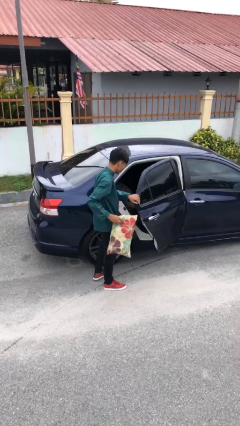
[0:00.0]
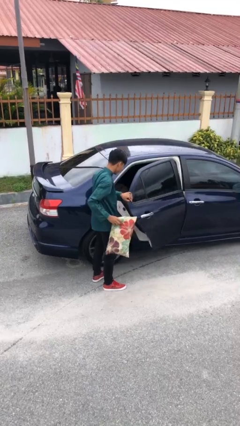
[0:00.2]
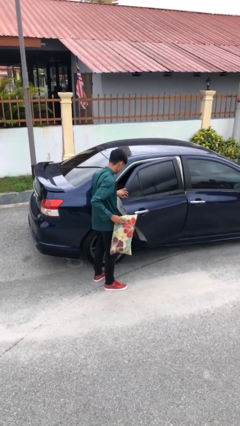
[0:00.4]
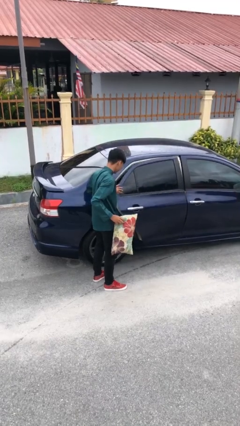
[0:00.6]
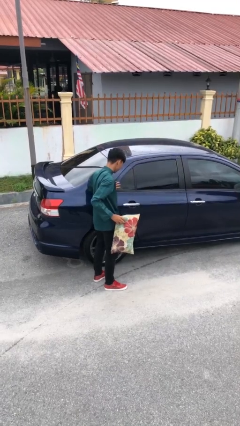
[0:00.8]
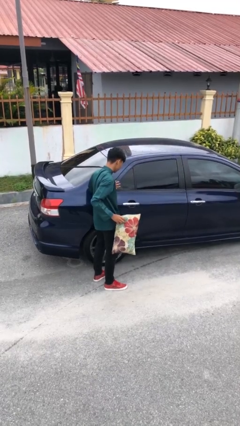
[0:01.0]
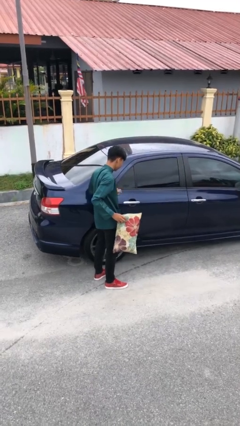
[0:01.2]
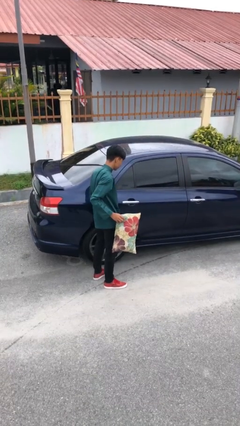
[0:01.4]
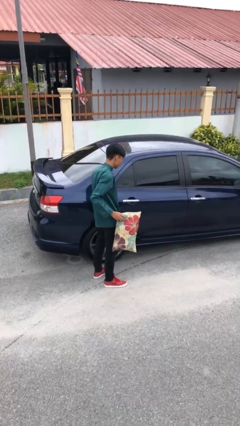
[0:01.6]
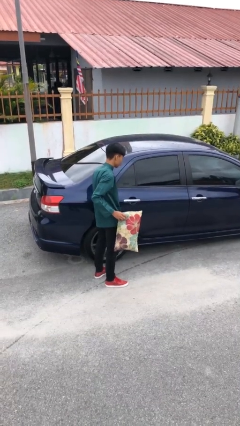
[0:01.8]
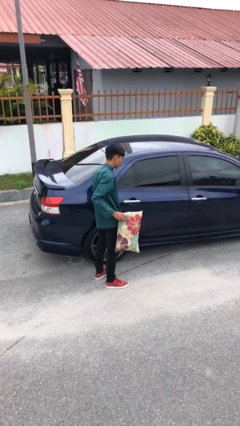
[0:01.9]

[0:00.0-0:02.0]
person closes car door

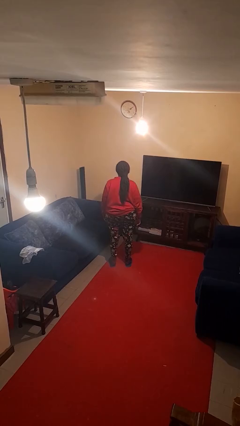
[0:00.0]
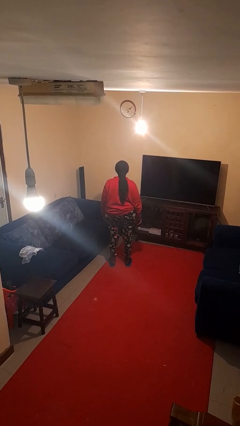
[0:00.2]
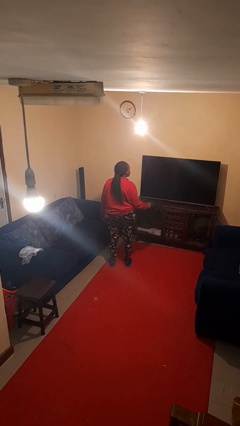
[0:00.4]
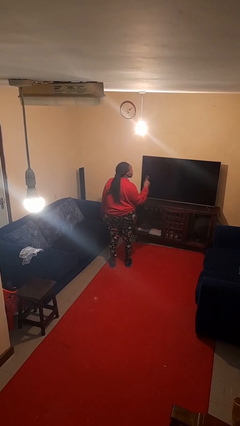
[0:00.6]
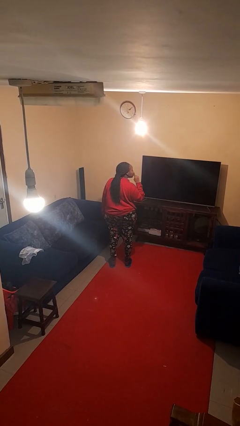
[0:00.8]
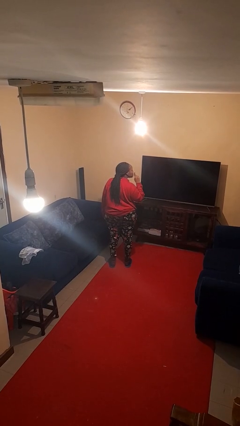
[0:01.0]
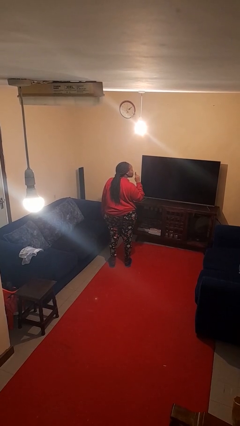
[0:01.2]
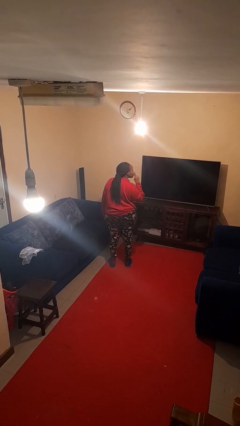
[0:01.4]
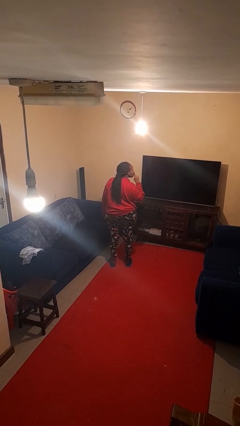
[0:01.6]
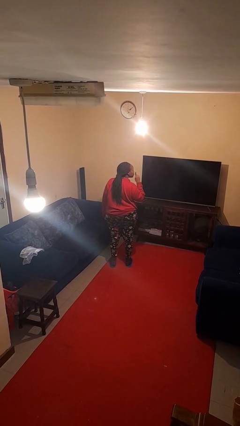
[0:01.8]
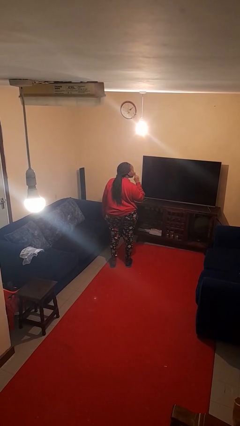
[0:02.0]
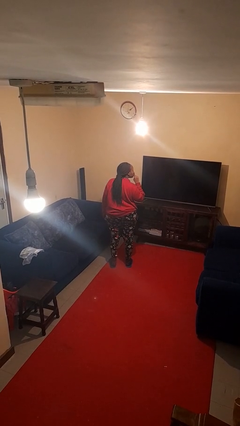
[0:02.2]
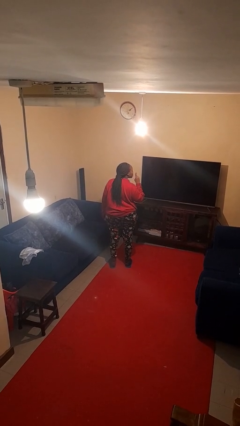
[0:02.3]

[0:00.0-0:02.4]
person gestures be quiet

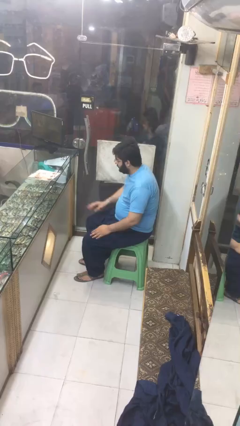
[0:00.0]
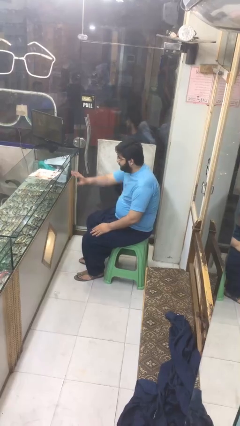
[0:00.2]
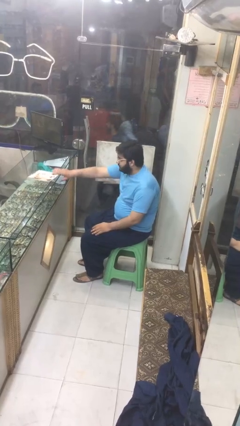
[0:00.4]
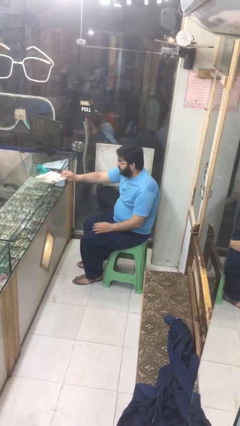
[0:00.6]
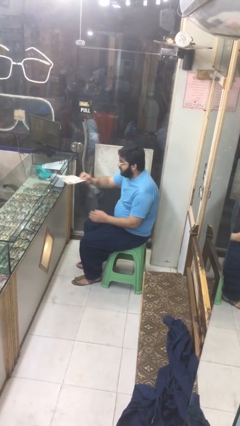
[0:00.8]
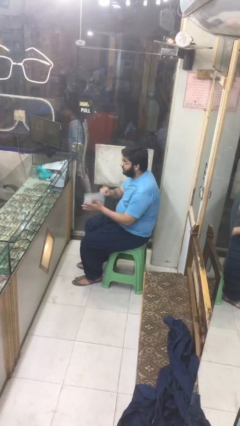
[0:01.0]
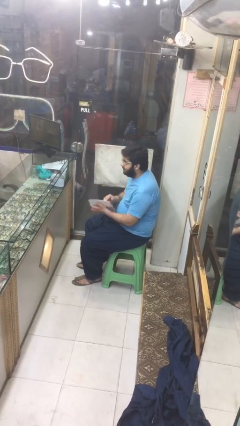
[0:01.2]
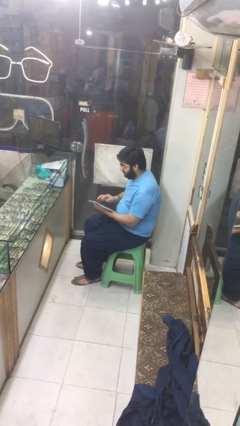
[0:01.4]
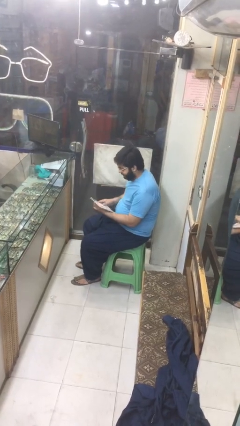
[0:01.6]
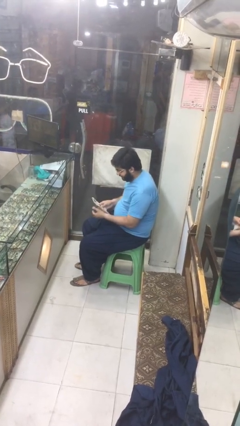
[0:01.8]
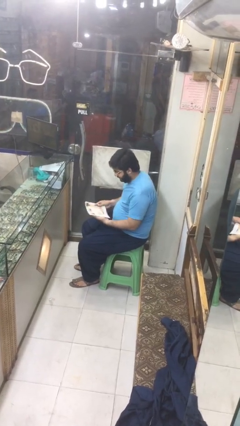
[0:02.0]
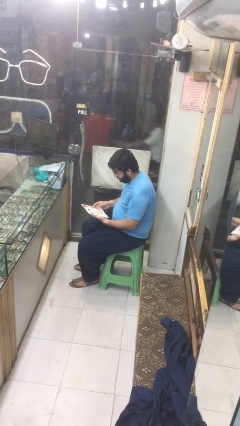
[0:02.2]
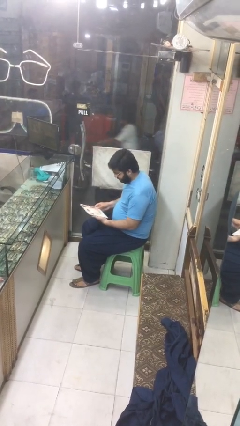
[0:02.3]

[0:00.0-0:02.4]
person picks up object from table

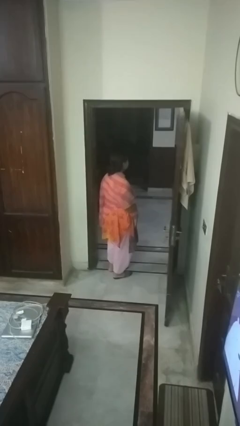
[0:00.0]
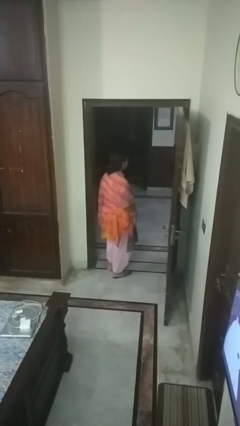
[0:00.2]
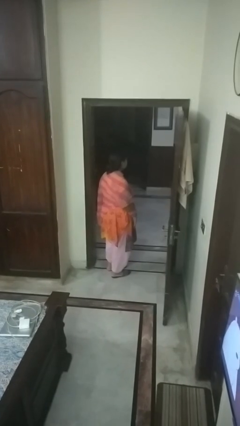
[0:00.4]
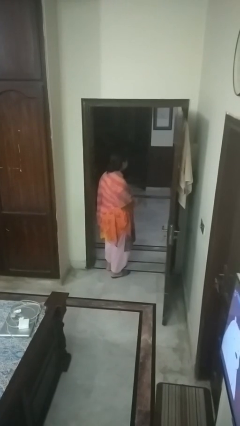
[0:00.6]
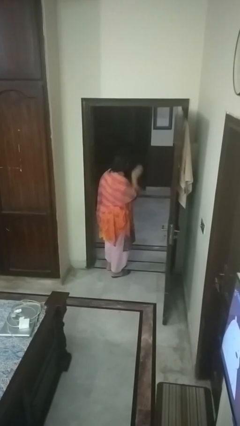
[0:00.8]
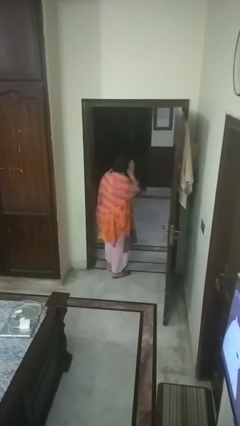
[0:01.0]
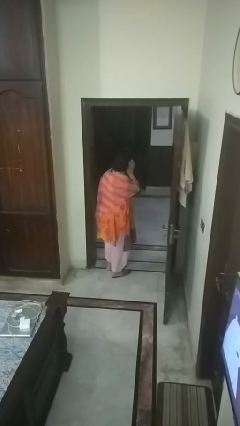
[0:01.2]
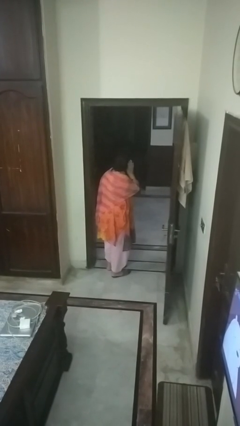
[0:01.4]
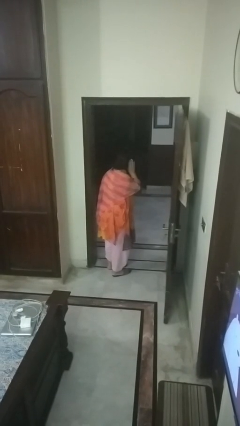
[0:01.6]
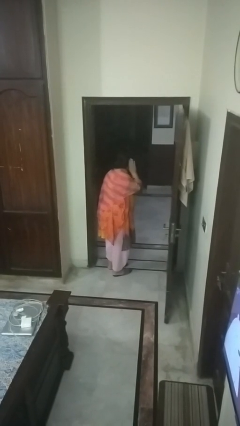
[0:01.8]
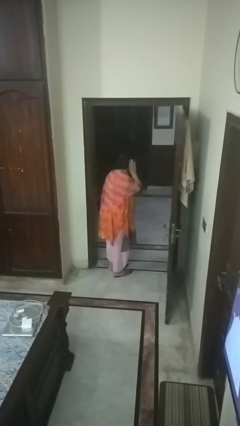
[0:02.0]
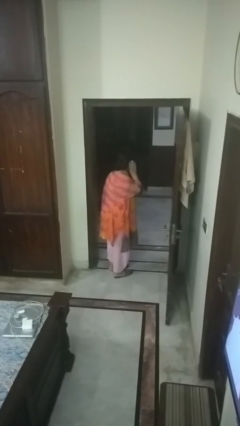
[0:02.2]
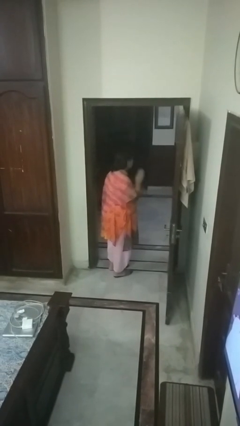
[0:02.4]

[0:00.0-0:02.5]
person gestures listen closely

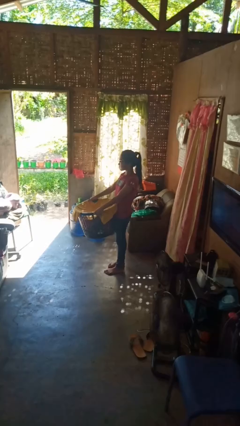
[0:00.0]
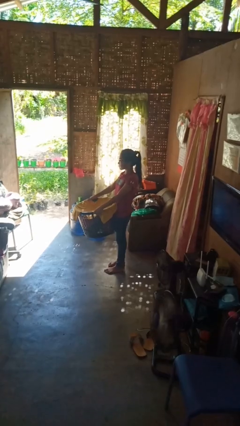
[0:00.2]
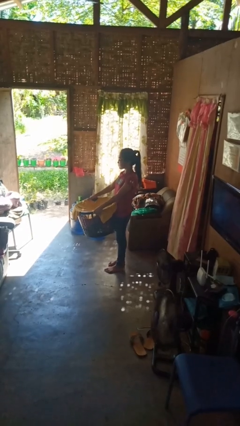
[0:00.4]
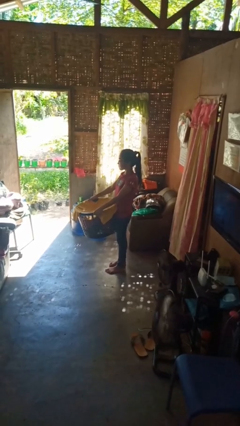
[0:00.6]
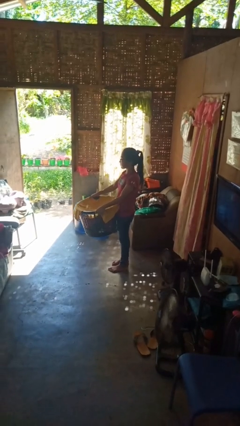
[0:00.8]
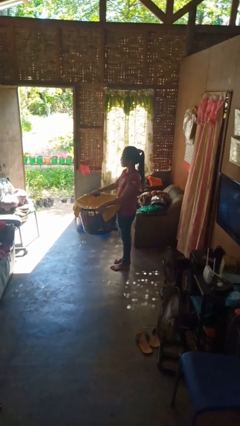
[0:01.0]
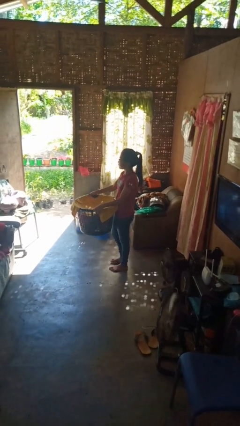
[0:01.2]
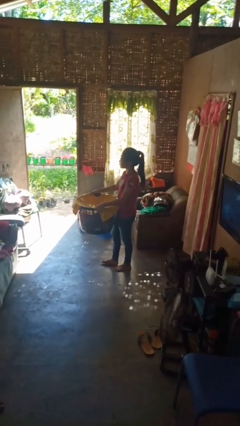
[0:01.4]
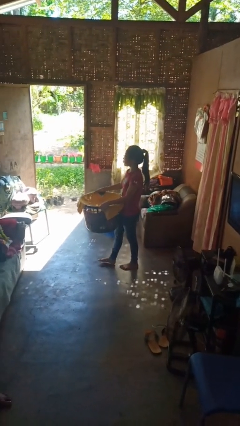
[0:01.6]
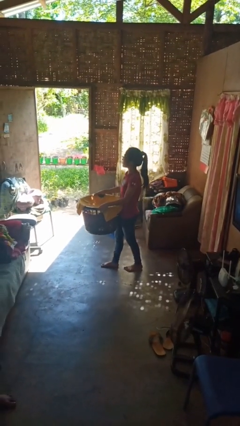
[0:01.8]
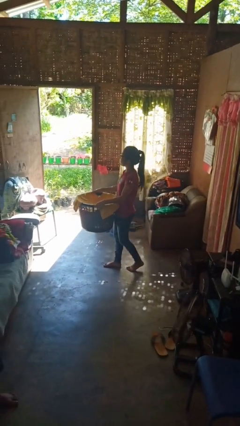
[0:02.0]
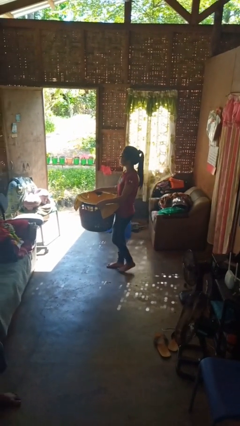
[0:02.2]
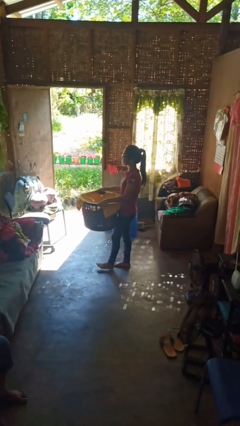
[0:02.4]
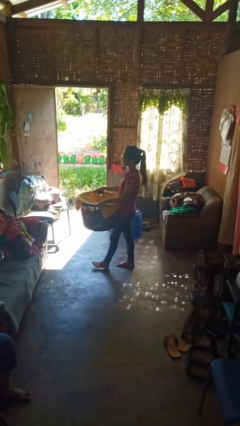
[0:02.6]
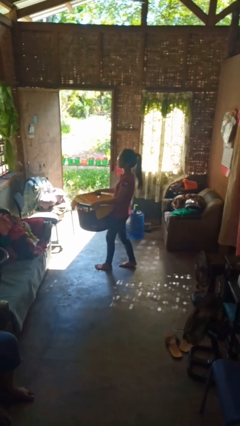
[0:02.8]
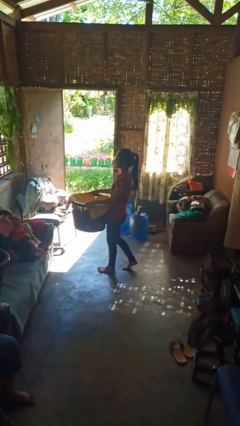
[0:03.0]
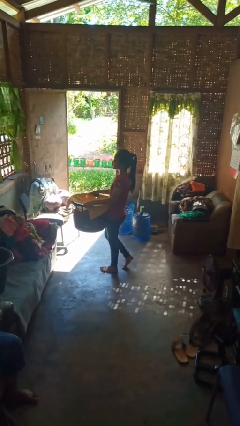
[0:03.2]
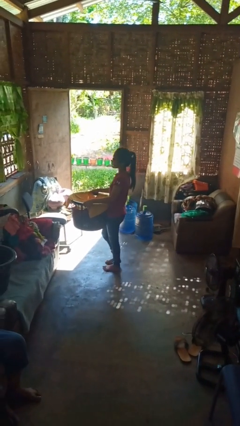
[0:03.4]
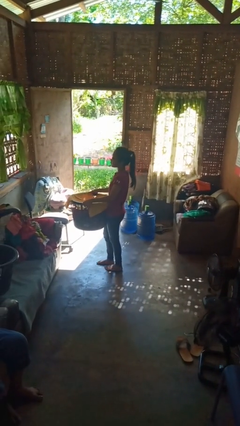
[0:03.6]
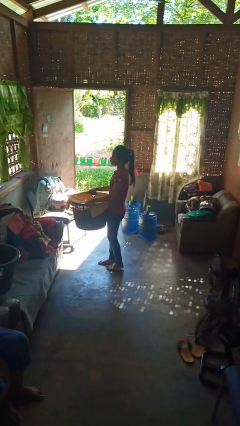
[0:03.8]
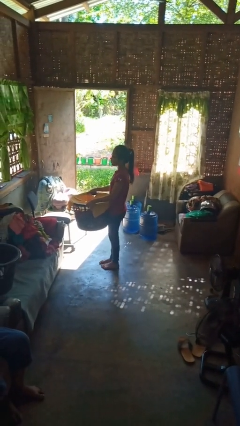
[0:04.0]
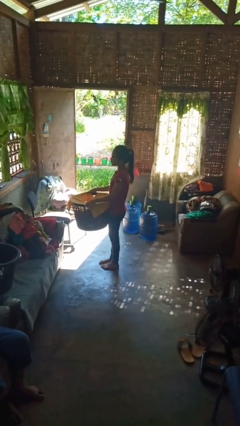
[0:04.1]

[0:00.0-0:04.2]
person carries laundry basket

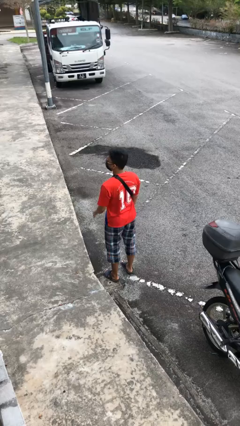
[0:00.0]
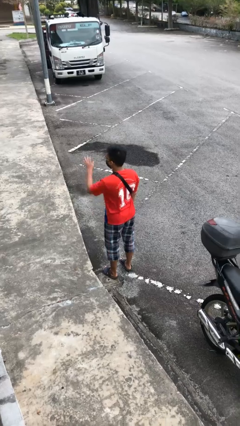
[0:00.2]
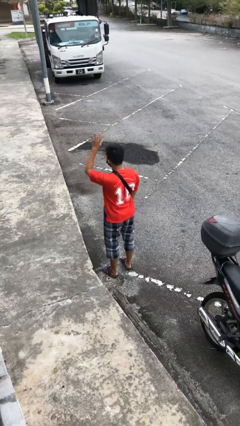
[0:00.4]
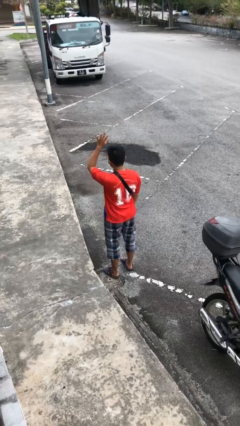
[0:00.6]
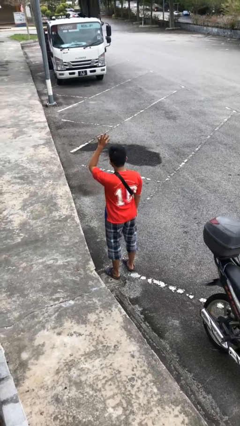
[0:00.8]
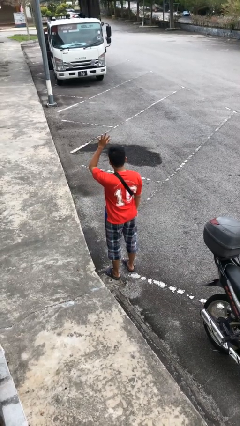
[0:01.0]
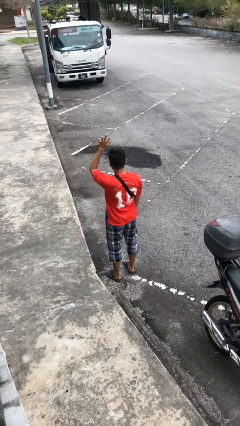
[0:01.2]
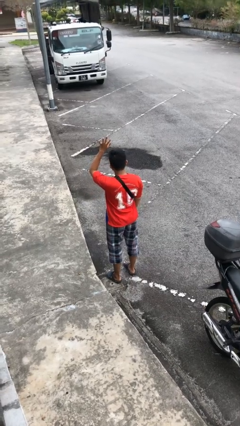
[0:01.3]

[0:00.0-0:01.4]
person gestures raise hand

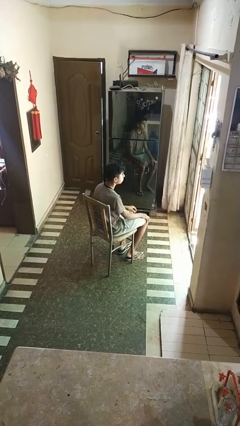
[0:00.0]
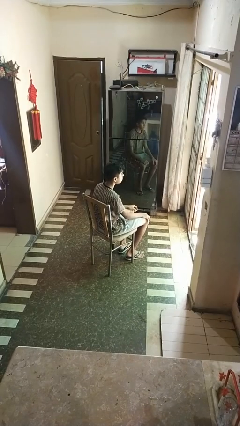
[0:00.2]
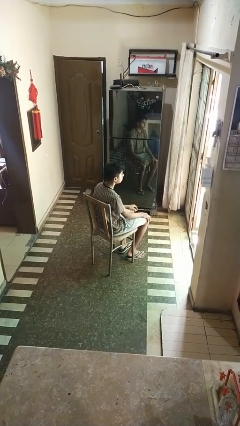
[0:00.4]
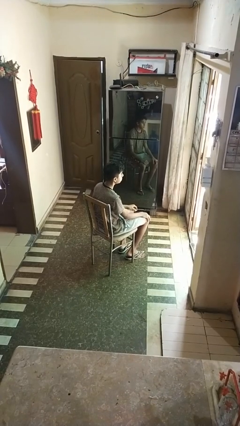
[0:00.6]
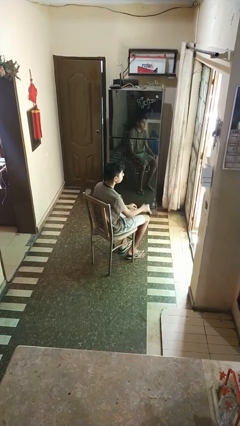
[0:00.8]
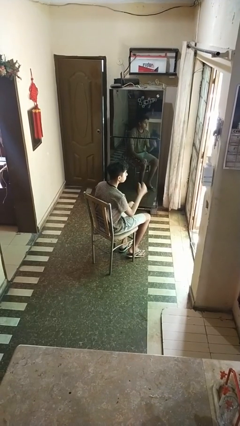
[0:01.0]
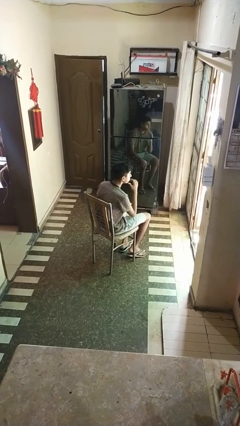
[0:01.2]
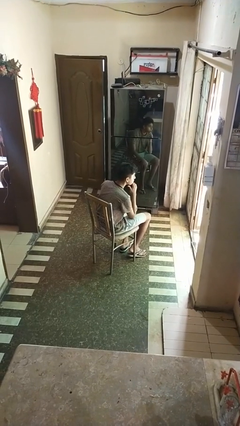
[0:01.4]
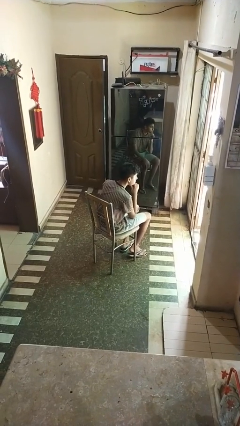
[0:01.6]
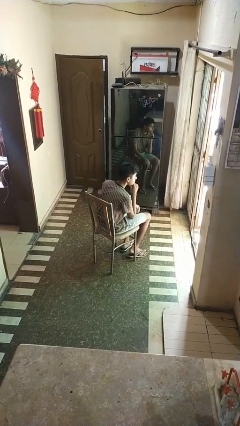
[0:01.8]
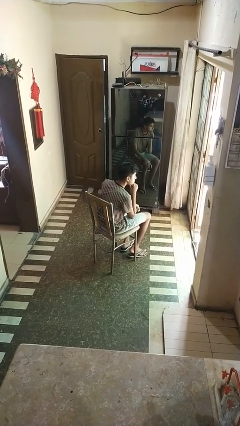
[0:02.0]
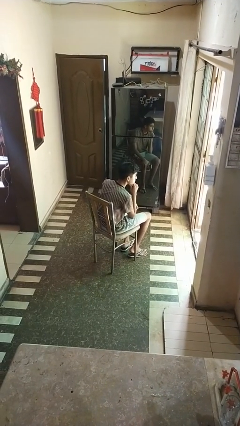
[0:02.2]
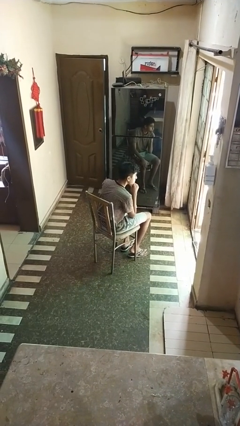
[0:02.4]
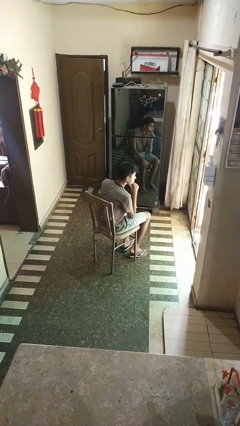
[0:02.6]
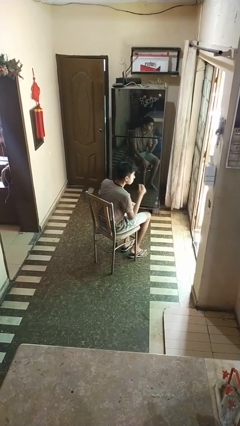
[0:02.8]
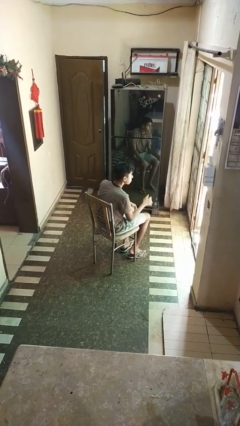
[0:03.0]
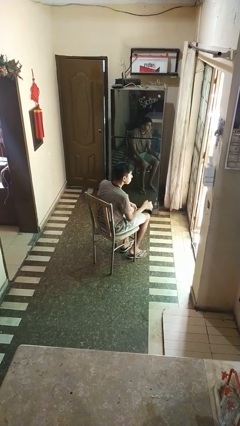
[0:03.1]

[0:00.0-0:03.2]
person strokes chin
